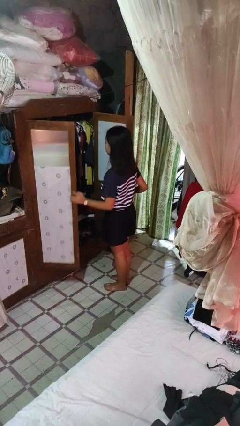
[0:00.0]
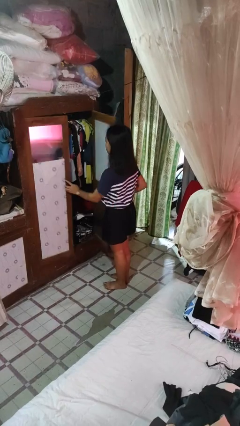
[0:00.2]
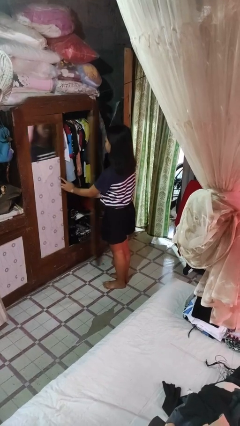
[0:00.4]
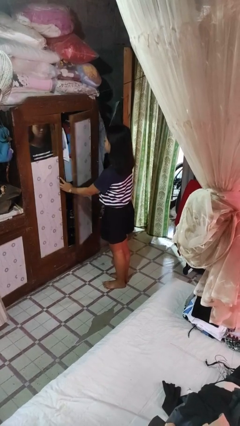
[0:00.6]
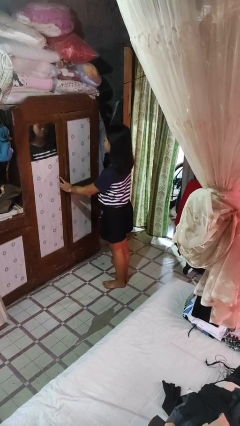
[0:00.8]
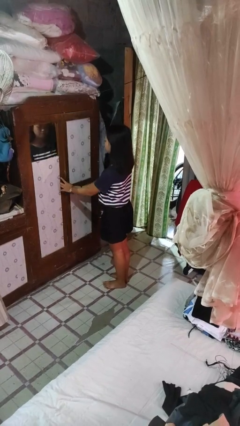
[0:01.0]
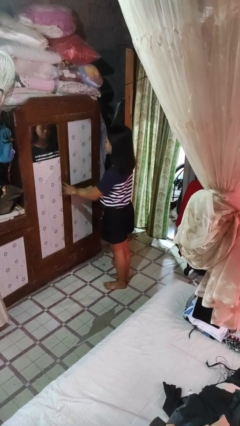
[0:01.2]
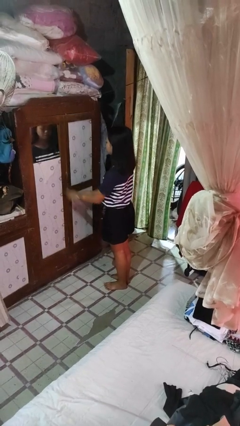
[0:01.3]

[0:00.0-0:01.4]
person closes closet door

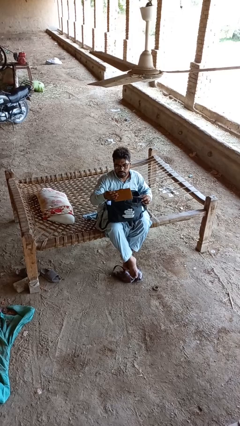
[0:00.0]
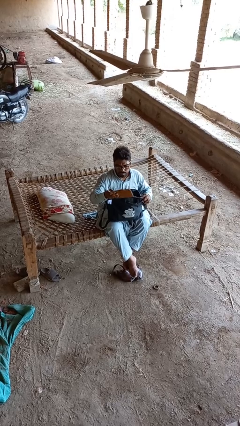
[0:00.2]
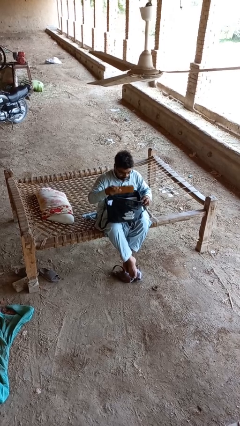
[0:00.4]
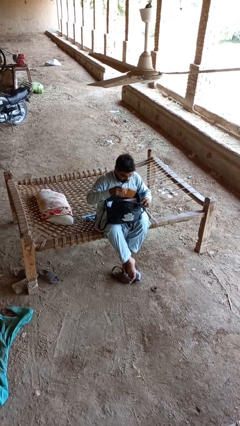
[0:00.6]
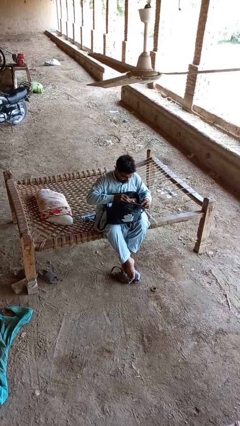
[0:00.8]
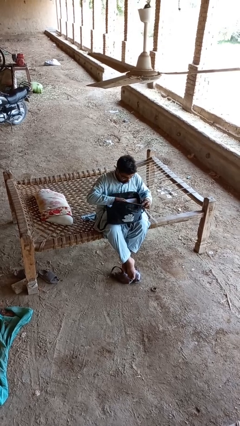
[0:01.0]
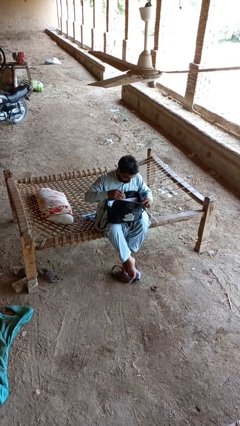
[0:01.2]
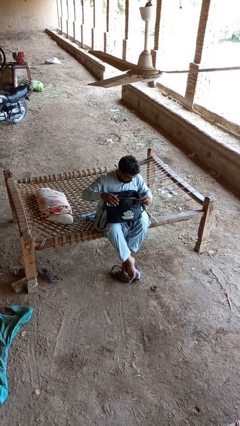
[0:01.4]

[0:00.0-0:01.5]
person puts object into backpack

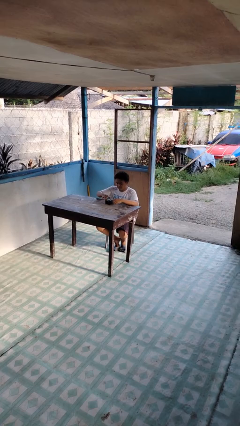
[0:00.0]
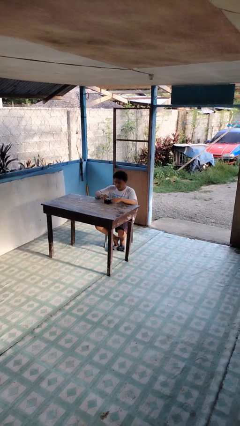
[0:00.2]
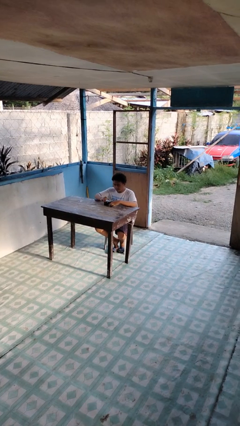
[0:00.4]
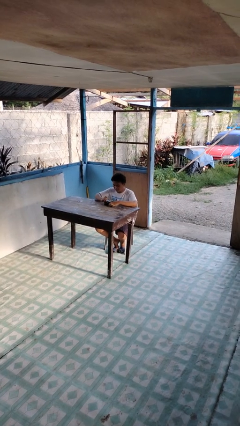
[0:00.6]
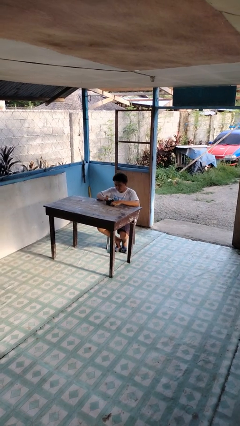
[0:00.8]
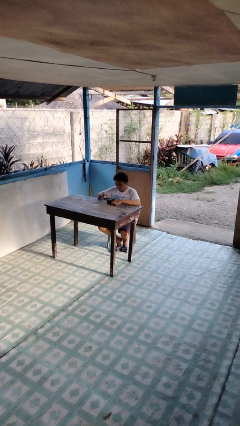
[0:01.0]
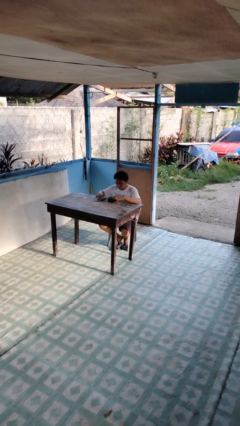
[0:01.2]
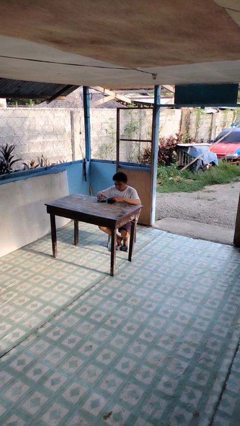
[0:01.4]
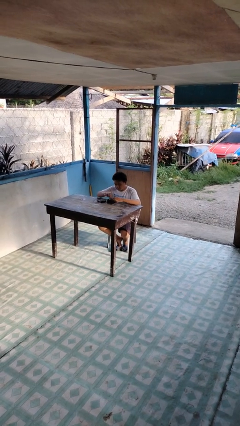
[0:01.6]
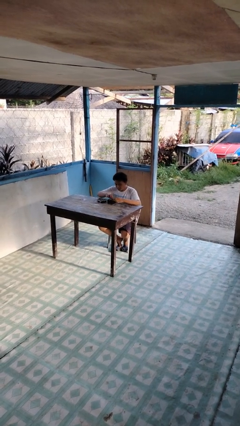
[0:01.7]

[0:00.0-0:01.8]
person opens jewelry box

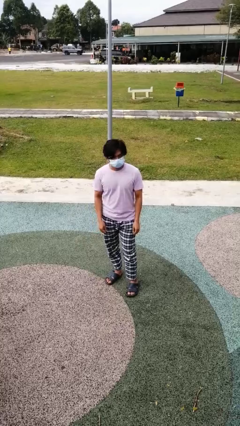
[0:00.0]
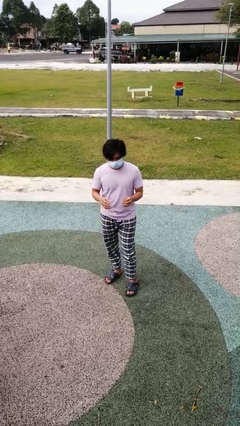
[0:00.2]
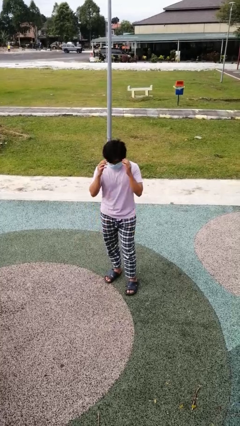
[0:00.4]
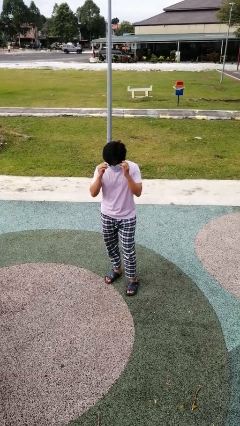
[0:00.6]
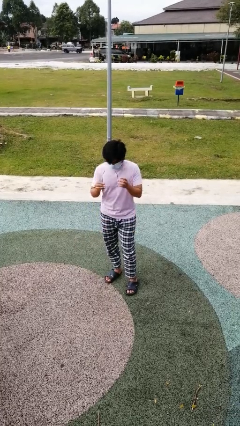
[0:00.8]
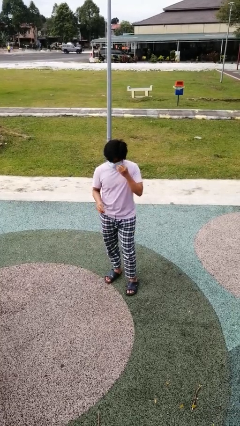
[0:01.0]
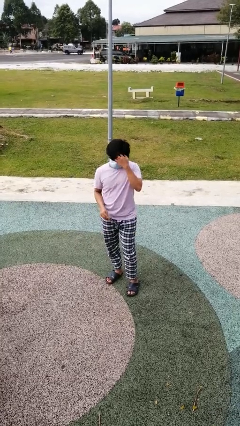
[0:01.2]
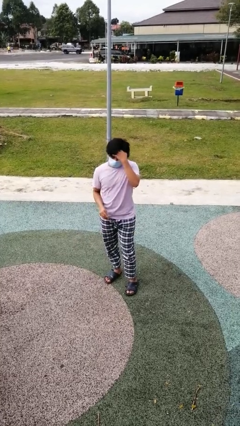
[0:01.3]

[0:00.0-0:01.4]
person takes off glasses

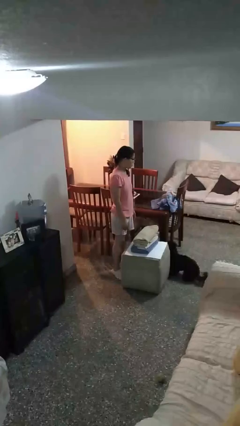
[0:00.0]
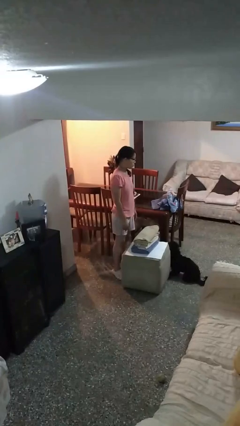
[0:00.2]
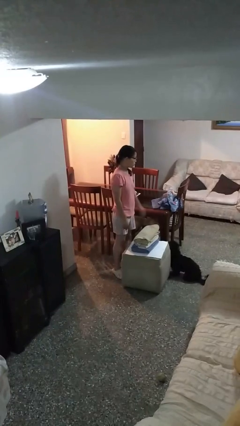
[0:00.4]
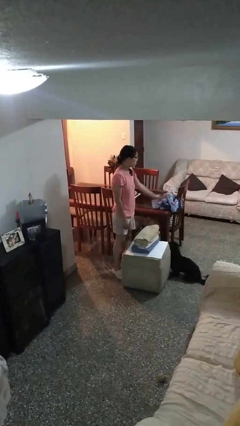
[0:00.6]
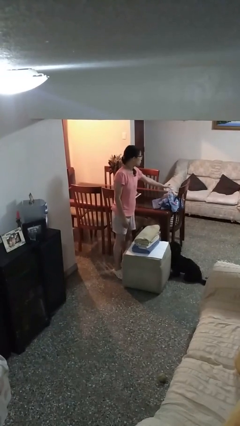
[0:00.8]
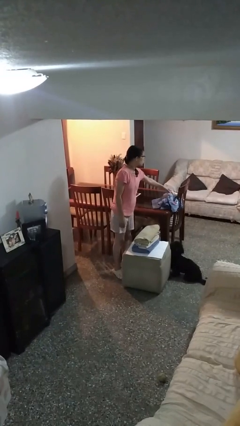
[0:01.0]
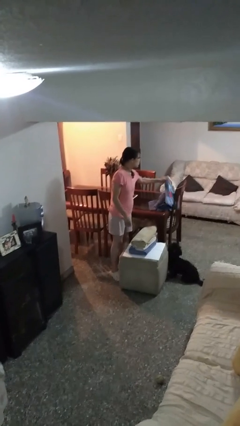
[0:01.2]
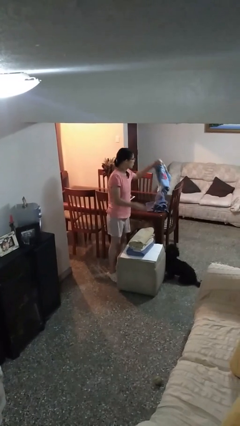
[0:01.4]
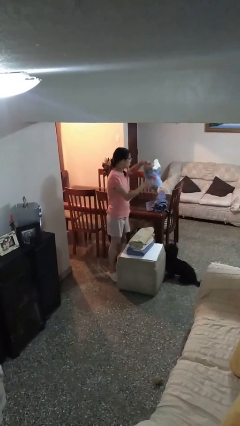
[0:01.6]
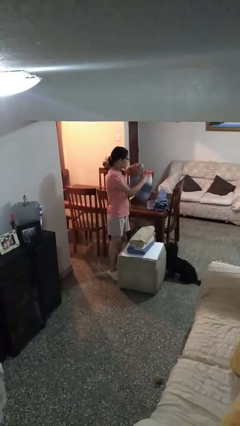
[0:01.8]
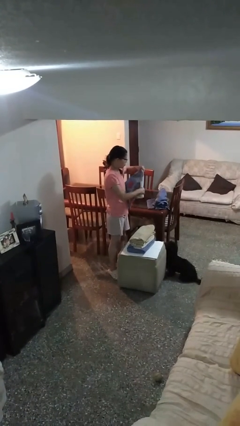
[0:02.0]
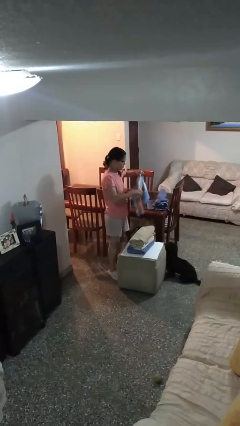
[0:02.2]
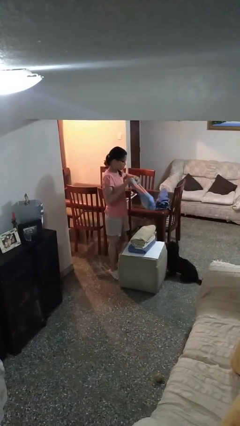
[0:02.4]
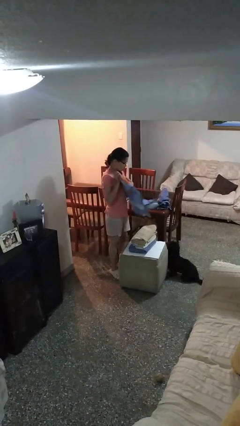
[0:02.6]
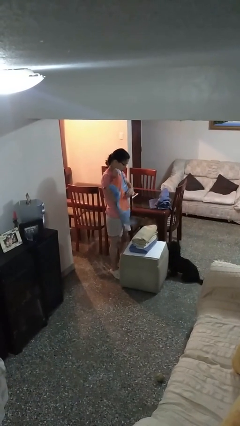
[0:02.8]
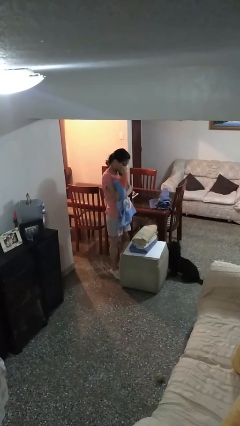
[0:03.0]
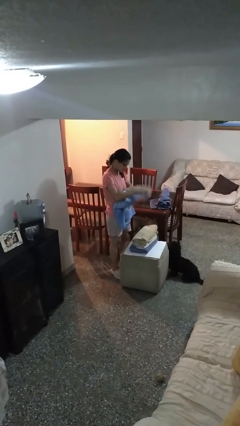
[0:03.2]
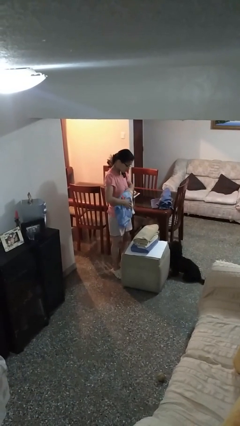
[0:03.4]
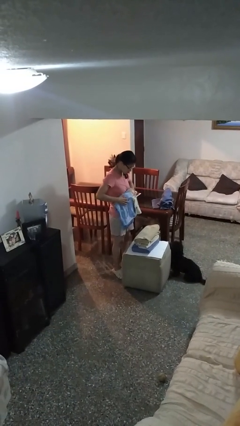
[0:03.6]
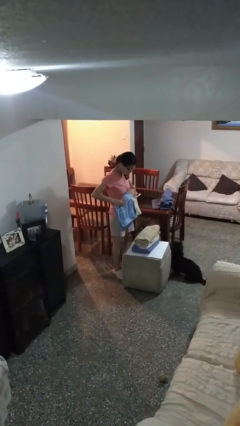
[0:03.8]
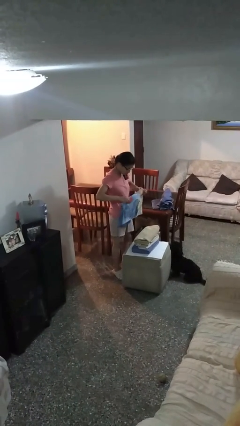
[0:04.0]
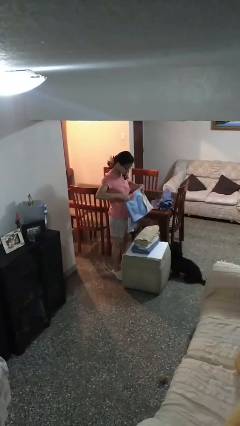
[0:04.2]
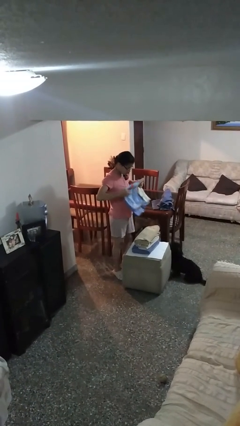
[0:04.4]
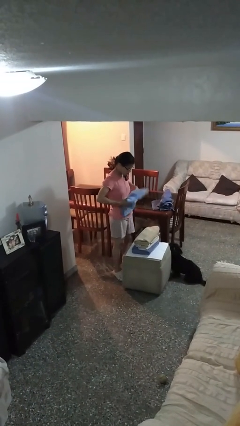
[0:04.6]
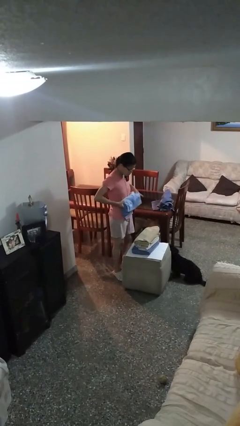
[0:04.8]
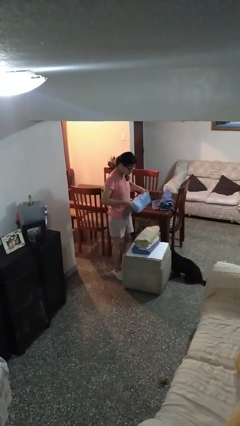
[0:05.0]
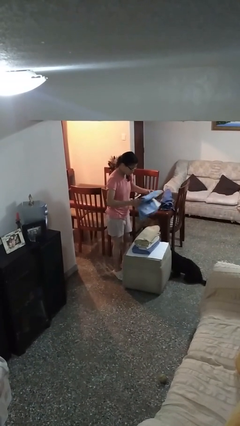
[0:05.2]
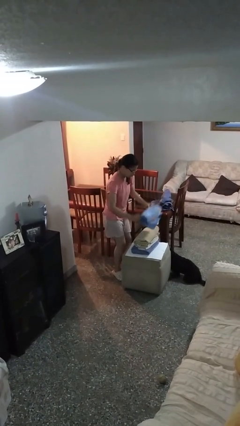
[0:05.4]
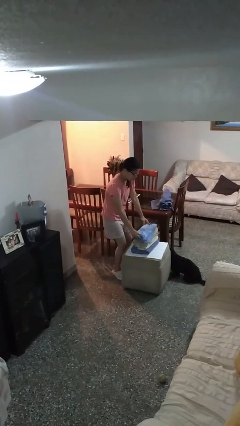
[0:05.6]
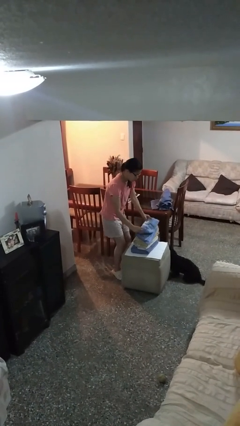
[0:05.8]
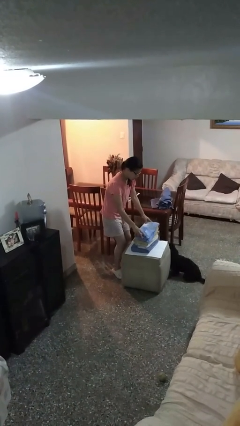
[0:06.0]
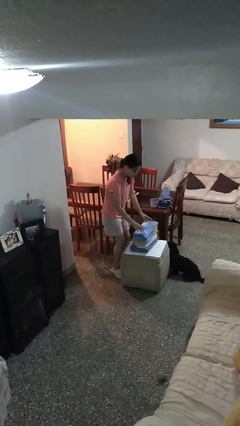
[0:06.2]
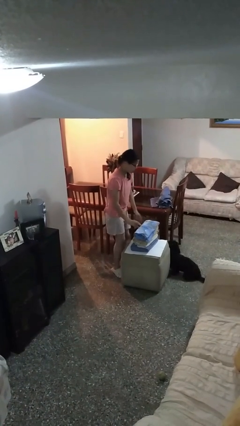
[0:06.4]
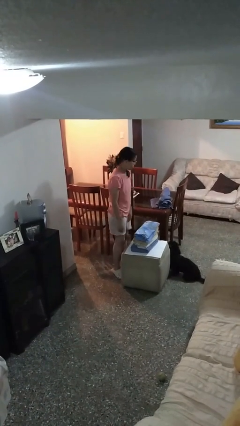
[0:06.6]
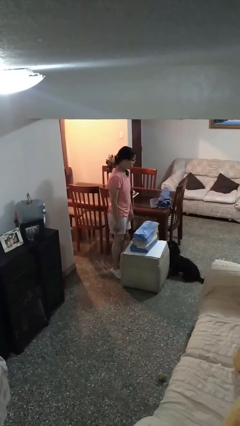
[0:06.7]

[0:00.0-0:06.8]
person folds towel

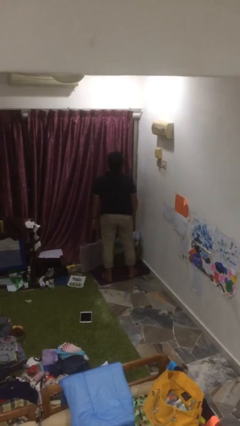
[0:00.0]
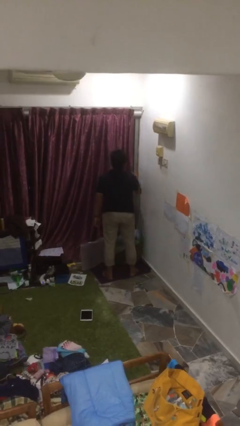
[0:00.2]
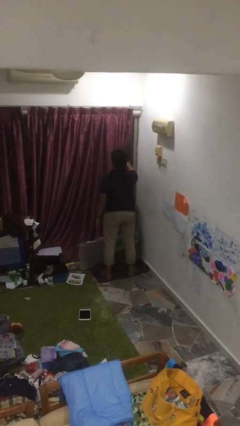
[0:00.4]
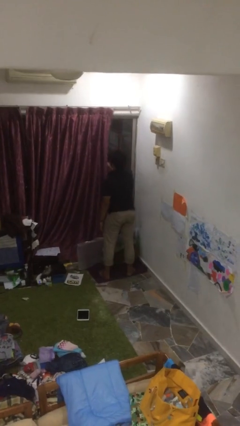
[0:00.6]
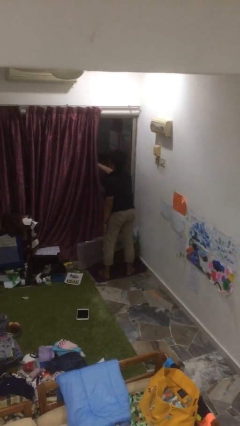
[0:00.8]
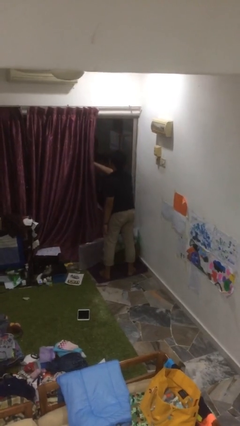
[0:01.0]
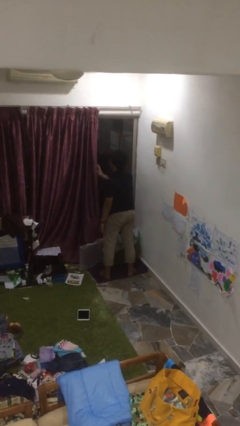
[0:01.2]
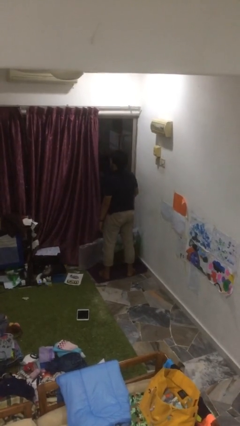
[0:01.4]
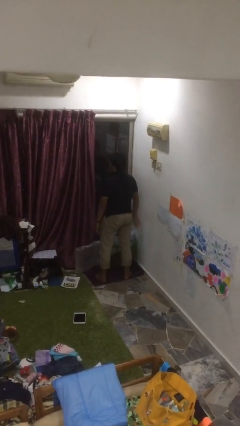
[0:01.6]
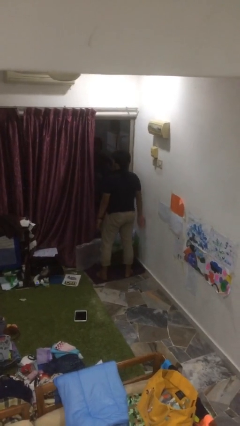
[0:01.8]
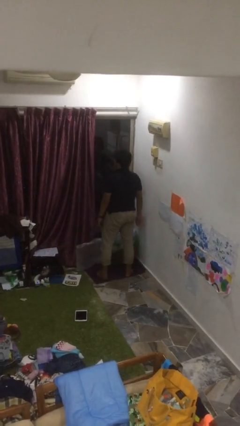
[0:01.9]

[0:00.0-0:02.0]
person opens curtains

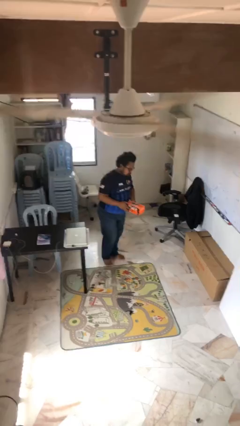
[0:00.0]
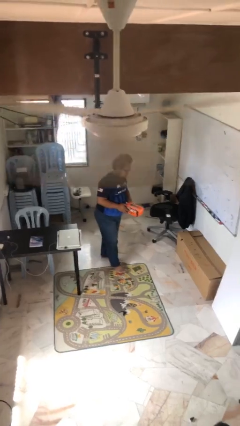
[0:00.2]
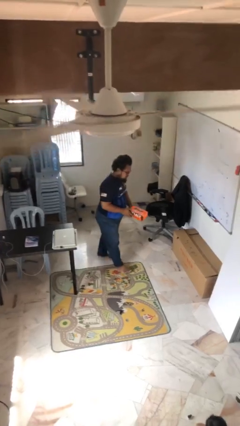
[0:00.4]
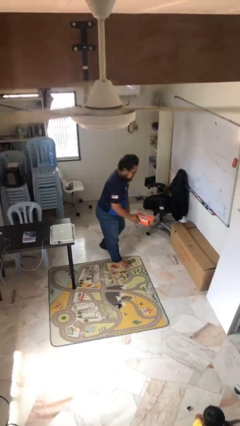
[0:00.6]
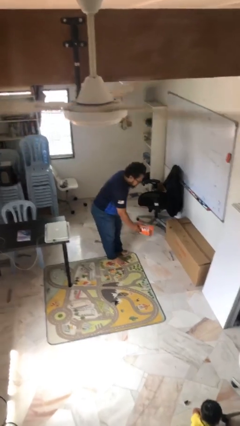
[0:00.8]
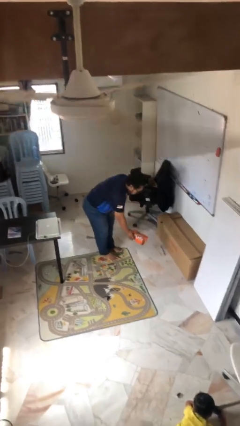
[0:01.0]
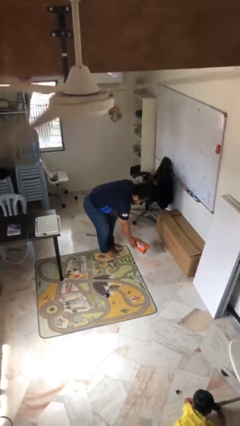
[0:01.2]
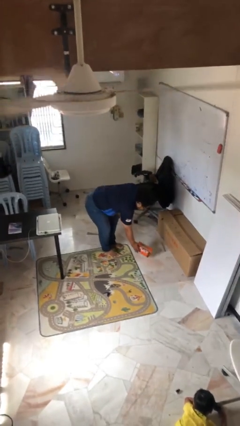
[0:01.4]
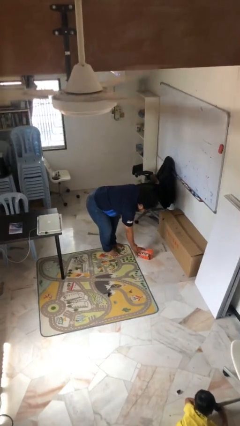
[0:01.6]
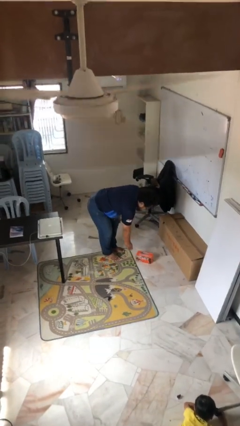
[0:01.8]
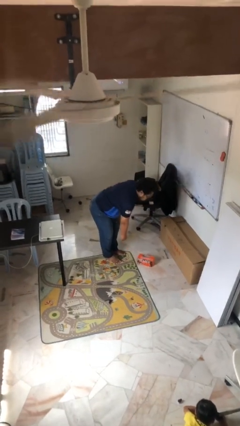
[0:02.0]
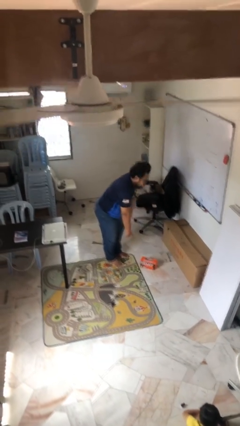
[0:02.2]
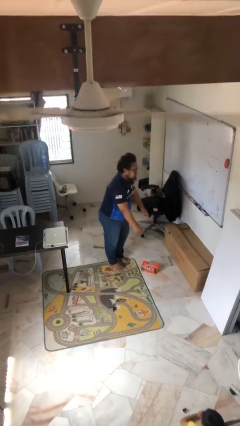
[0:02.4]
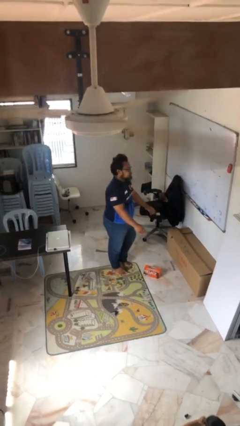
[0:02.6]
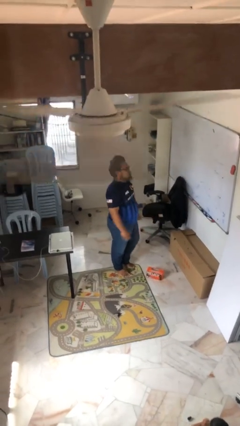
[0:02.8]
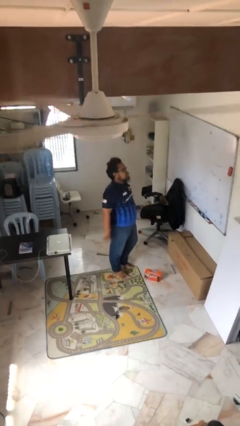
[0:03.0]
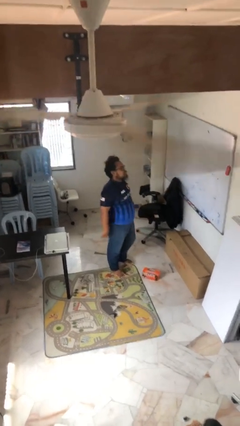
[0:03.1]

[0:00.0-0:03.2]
person puts down object on floor
